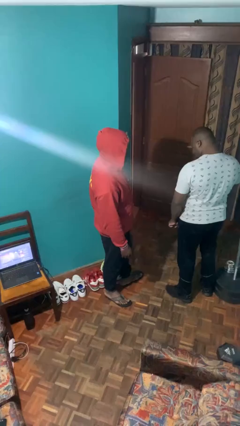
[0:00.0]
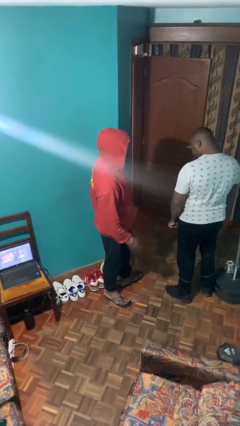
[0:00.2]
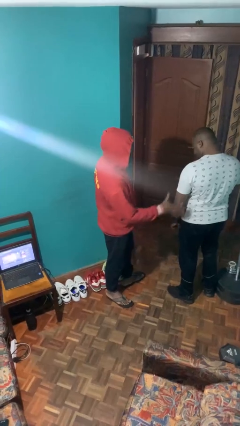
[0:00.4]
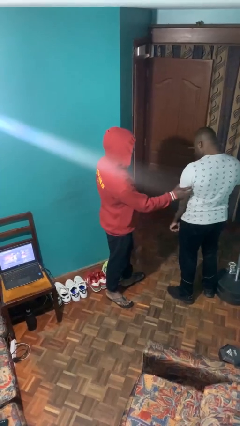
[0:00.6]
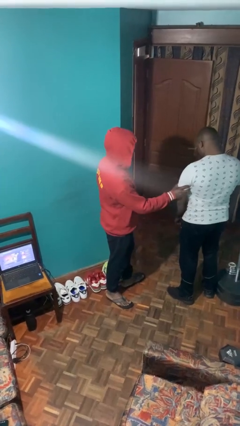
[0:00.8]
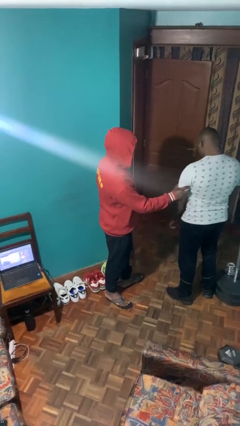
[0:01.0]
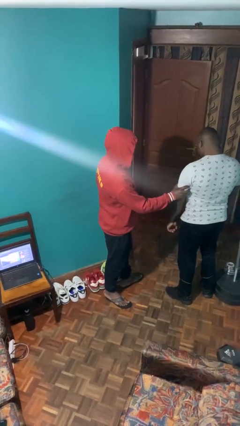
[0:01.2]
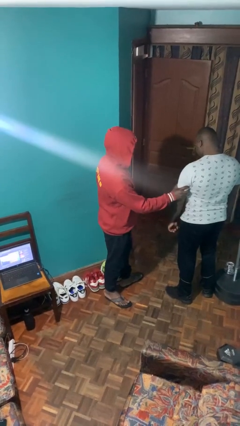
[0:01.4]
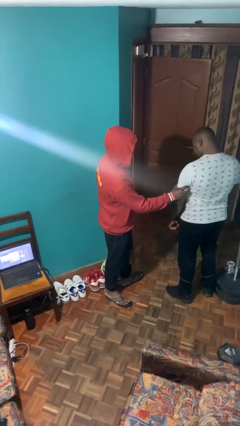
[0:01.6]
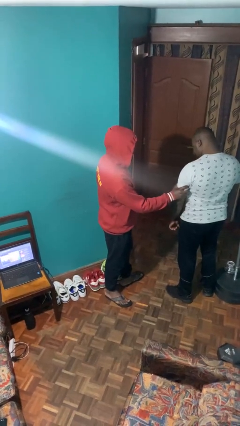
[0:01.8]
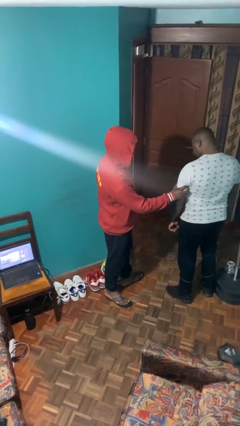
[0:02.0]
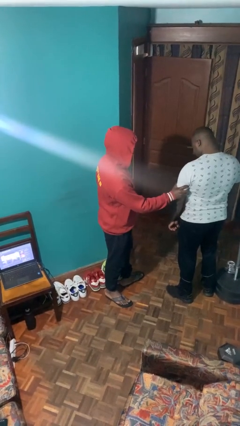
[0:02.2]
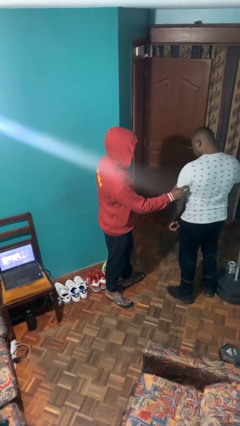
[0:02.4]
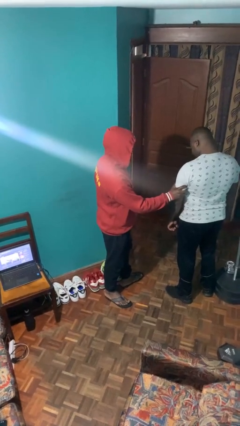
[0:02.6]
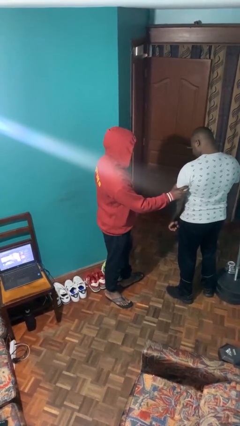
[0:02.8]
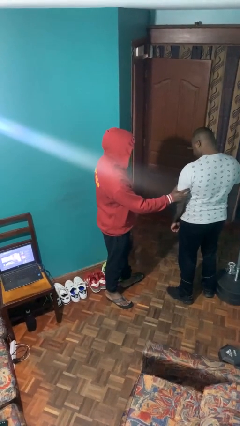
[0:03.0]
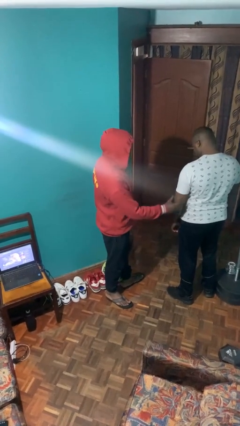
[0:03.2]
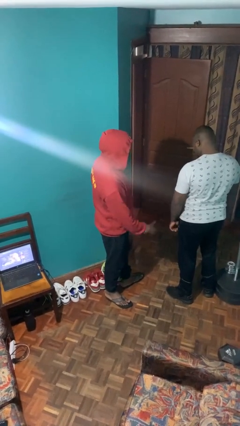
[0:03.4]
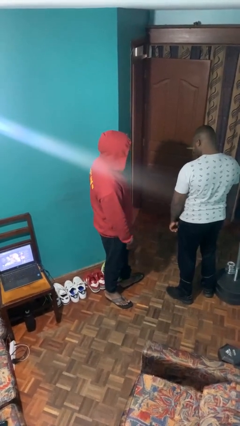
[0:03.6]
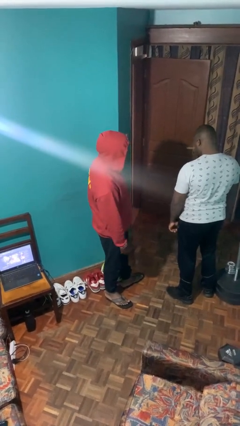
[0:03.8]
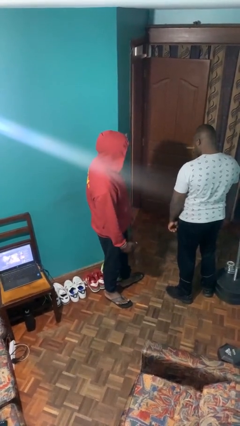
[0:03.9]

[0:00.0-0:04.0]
person grabs person by bicep

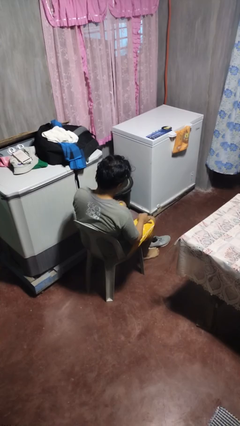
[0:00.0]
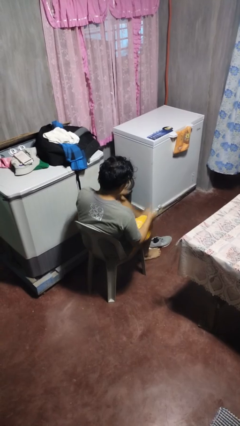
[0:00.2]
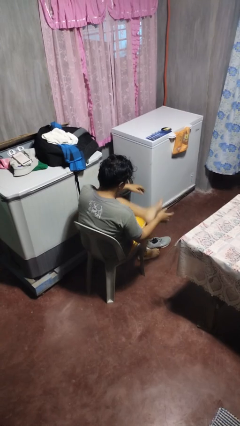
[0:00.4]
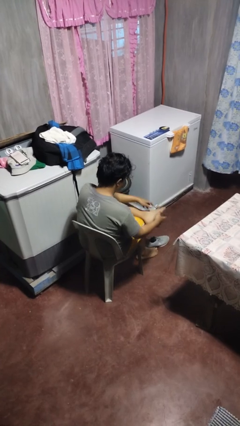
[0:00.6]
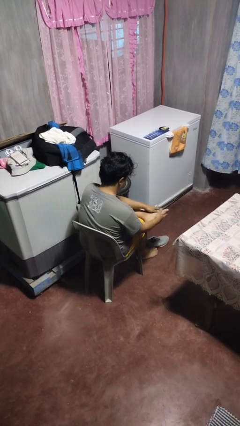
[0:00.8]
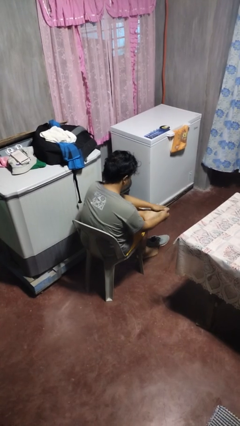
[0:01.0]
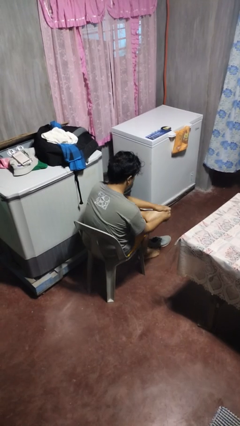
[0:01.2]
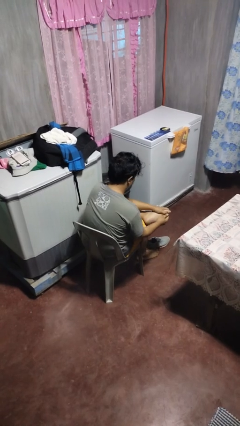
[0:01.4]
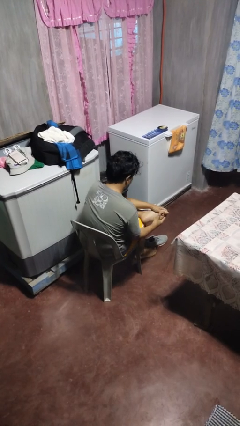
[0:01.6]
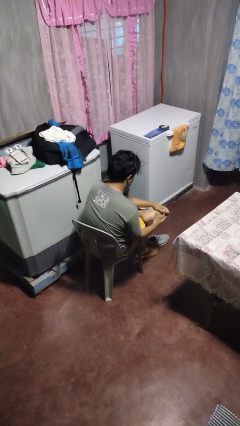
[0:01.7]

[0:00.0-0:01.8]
person rubs foot

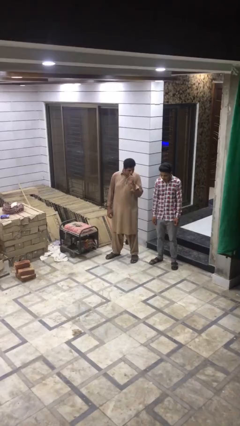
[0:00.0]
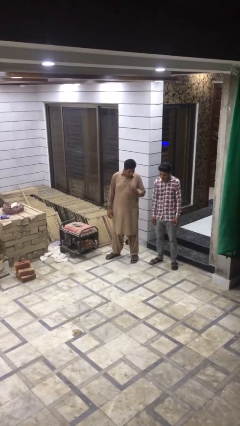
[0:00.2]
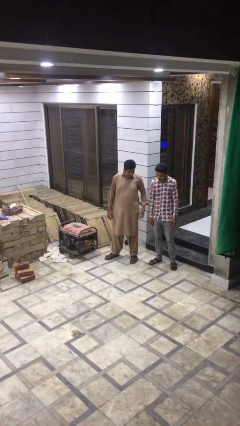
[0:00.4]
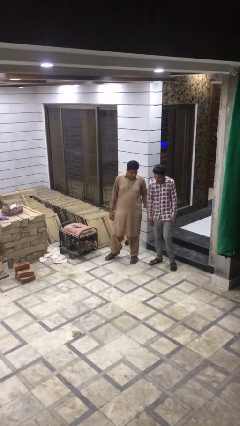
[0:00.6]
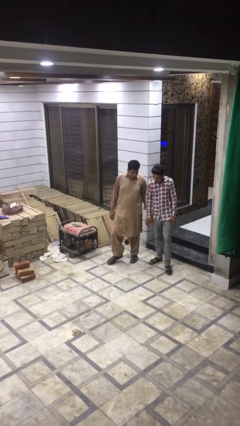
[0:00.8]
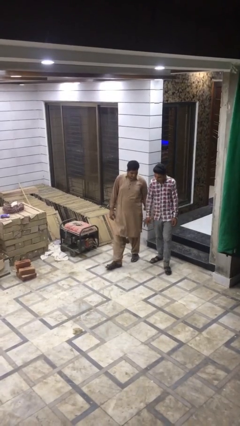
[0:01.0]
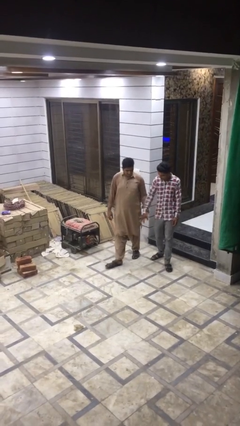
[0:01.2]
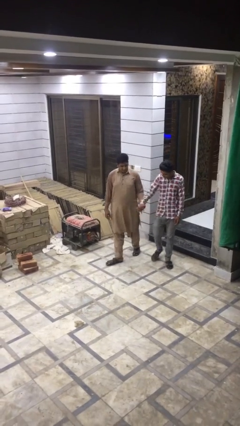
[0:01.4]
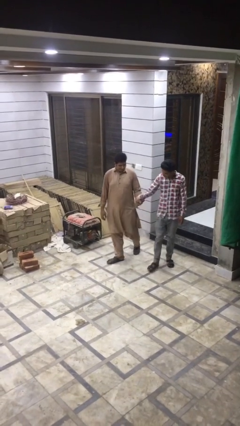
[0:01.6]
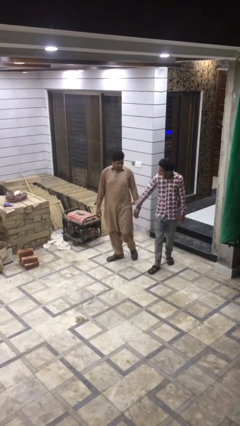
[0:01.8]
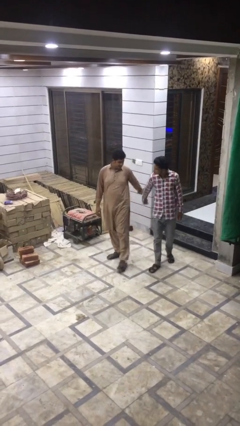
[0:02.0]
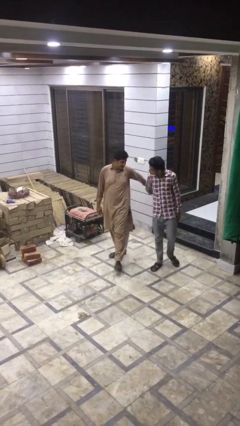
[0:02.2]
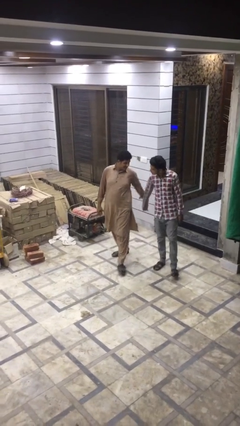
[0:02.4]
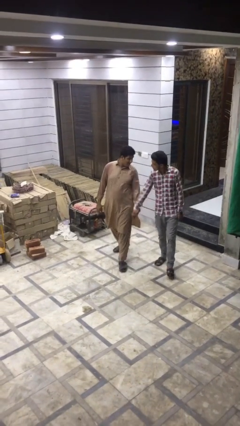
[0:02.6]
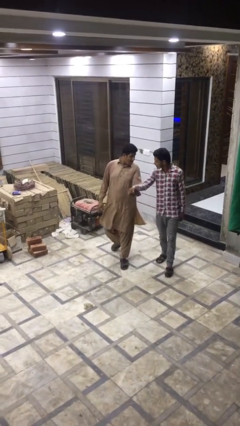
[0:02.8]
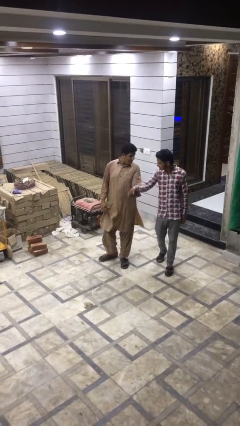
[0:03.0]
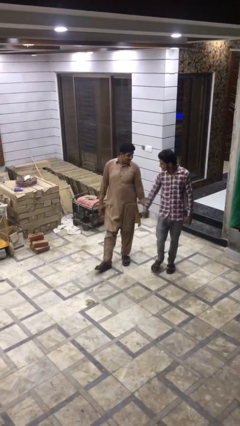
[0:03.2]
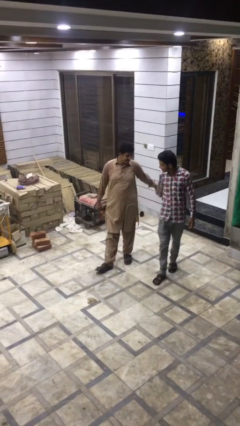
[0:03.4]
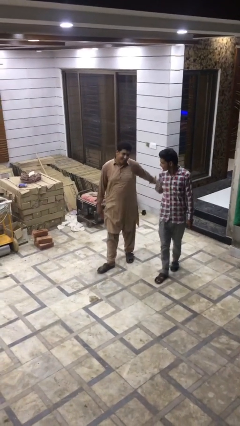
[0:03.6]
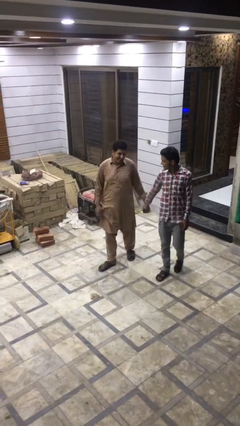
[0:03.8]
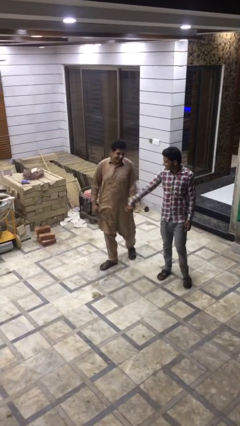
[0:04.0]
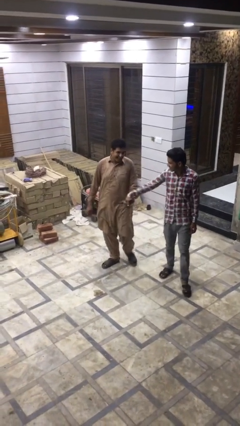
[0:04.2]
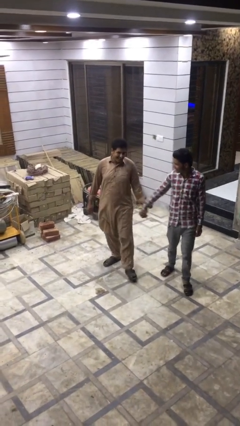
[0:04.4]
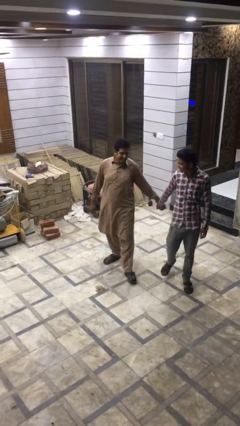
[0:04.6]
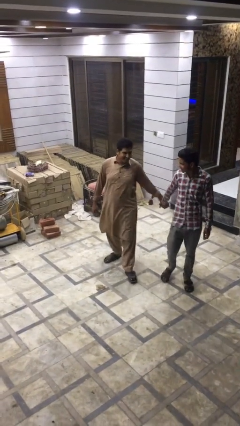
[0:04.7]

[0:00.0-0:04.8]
person holds hand

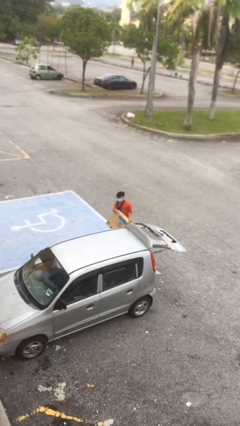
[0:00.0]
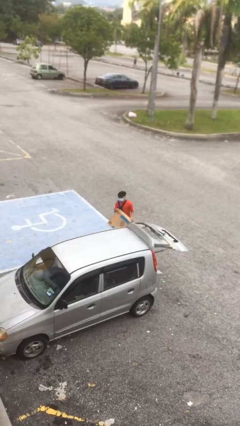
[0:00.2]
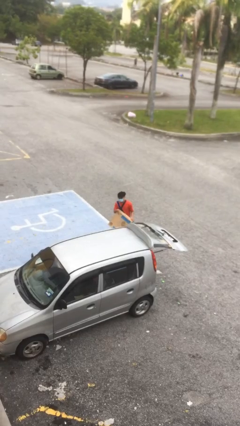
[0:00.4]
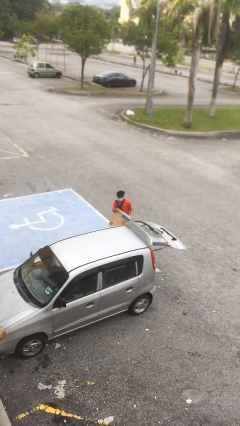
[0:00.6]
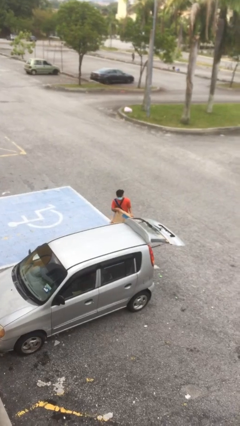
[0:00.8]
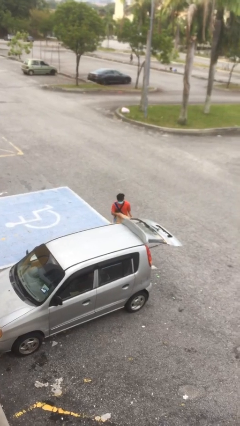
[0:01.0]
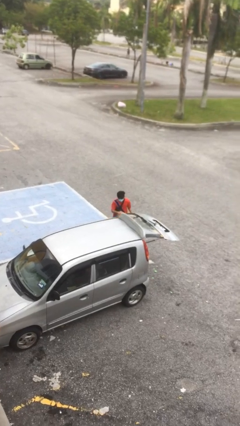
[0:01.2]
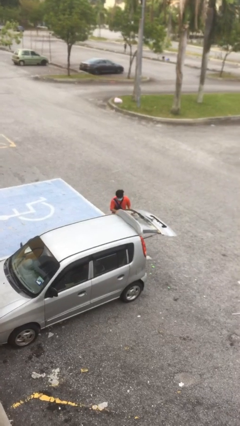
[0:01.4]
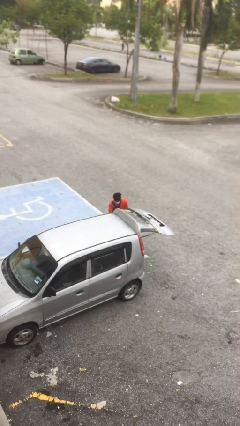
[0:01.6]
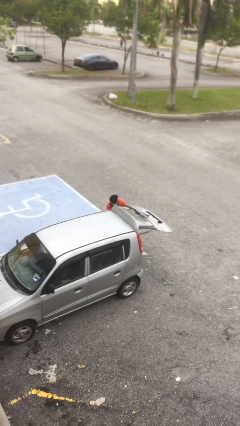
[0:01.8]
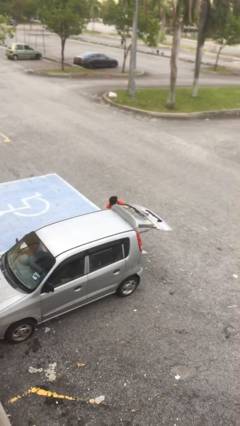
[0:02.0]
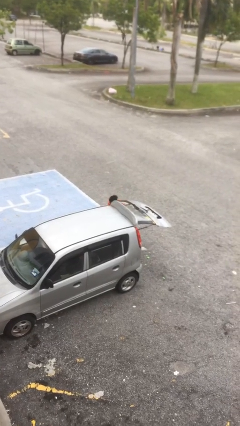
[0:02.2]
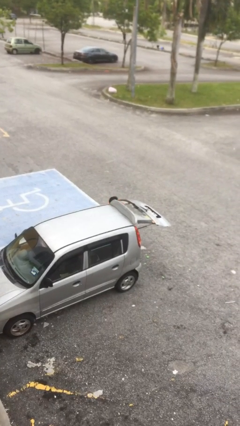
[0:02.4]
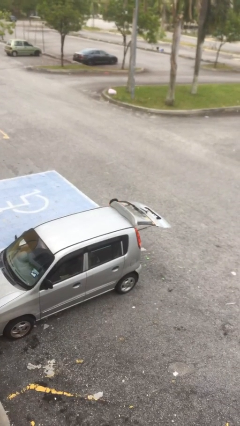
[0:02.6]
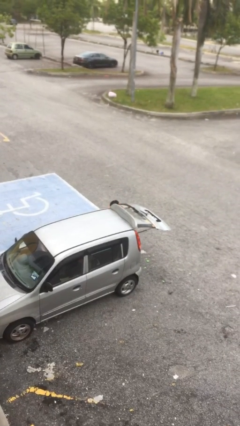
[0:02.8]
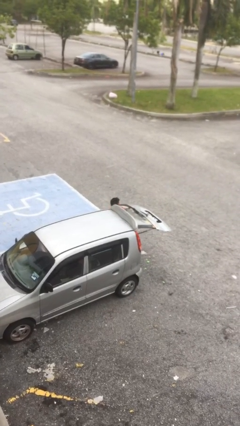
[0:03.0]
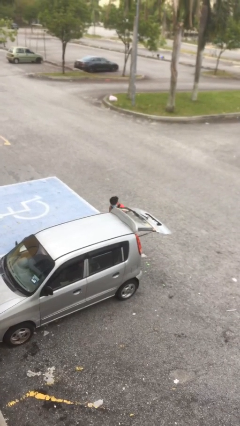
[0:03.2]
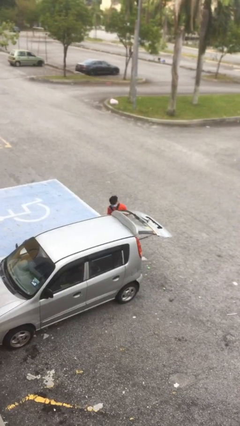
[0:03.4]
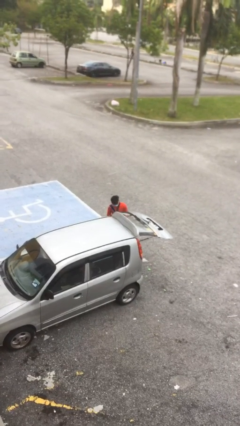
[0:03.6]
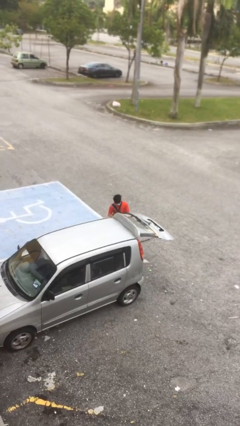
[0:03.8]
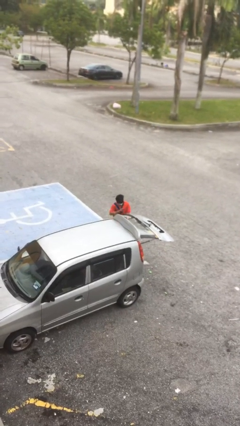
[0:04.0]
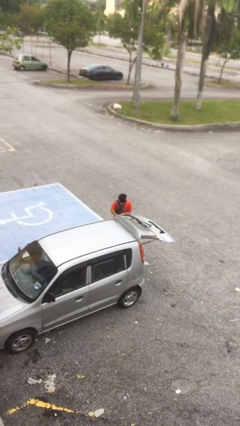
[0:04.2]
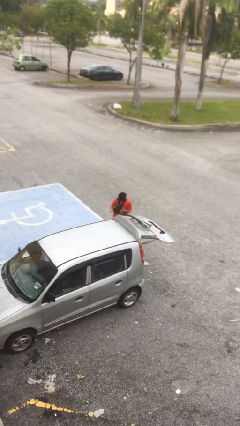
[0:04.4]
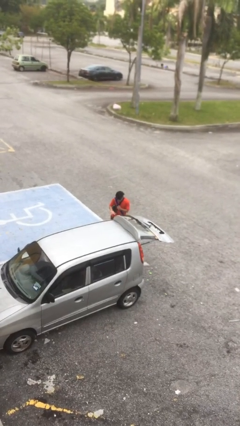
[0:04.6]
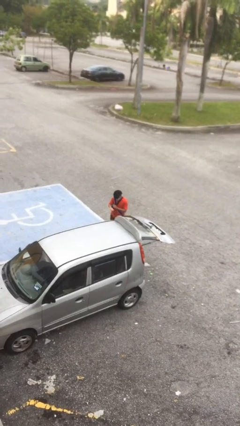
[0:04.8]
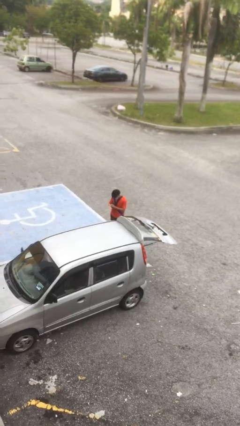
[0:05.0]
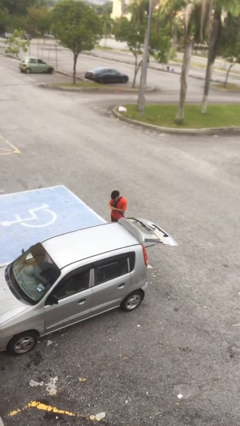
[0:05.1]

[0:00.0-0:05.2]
person loads car

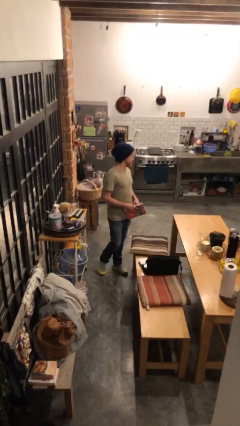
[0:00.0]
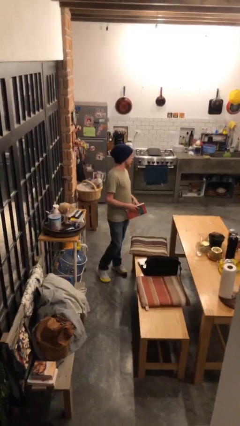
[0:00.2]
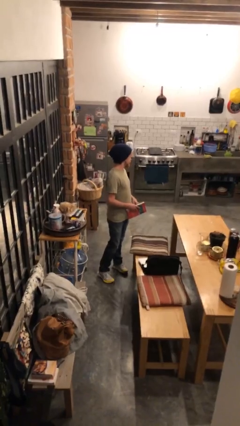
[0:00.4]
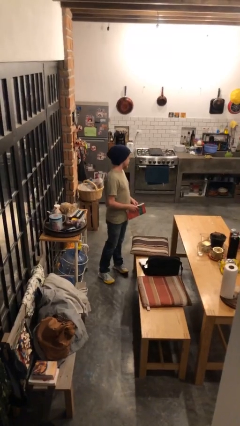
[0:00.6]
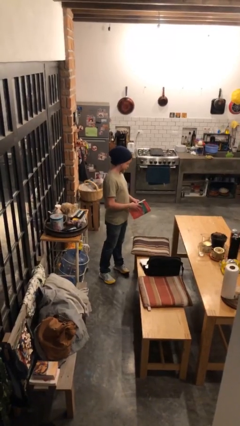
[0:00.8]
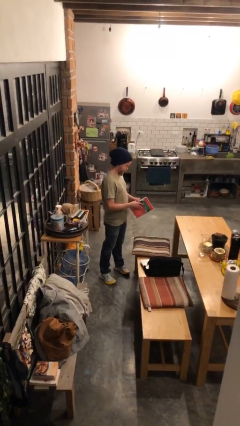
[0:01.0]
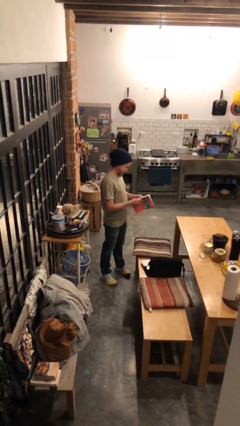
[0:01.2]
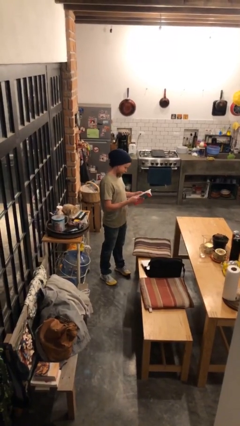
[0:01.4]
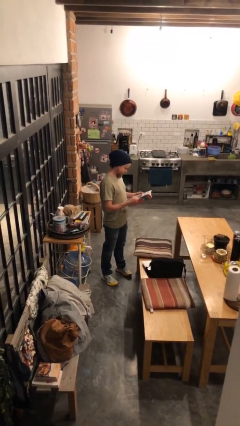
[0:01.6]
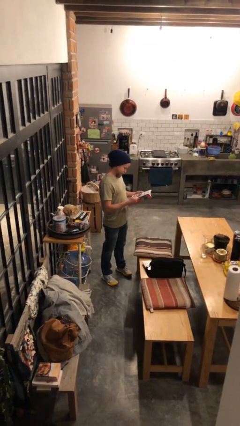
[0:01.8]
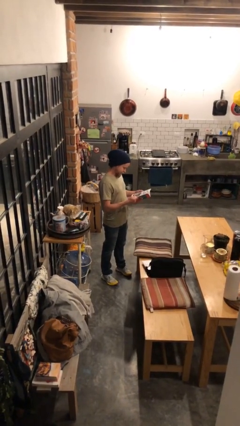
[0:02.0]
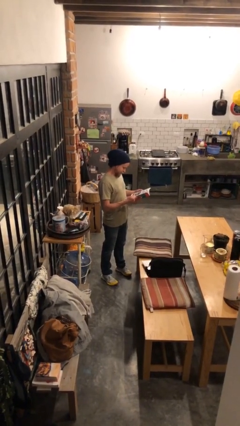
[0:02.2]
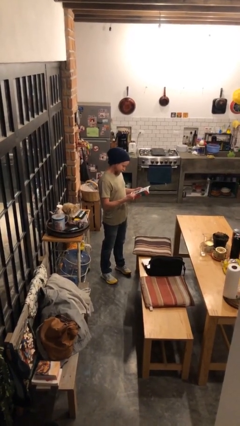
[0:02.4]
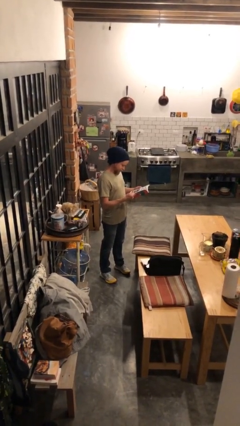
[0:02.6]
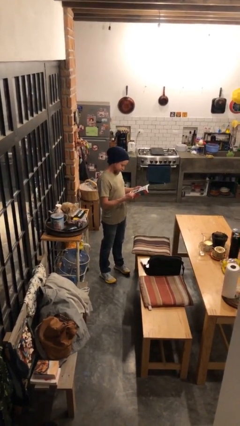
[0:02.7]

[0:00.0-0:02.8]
person reads document
